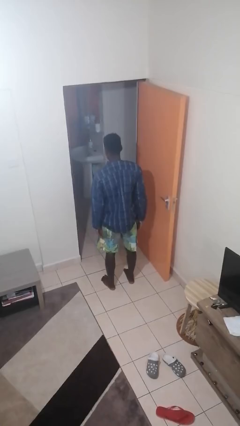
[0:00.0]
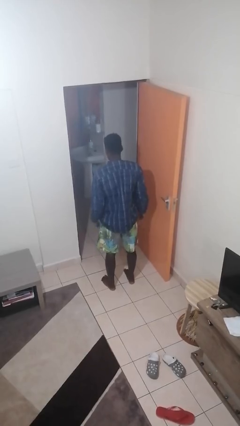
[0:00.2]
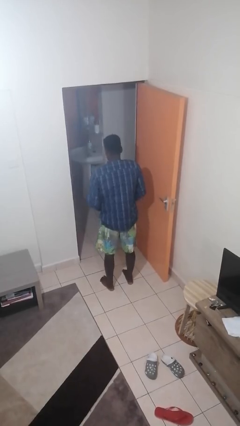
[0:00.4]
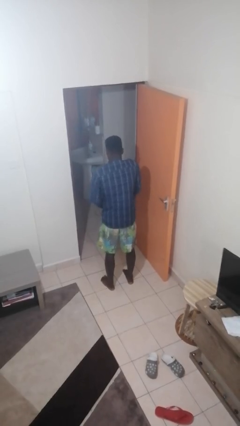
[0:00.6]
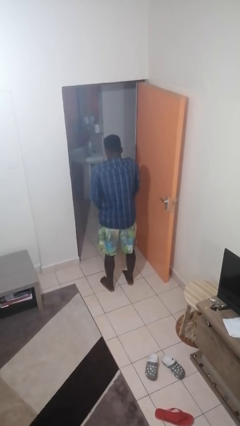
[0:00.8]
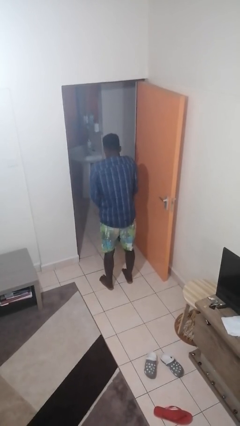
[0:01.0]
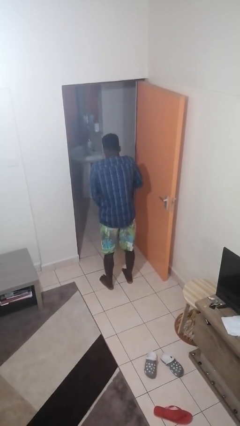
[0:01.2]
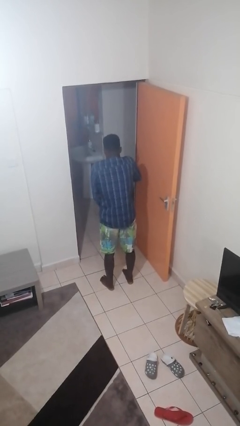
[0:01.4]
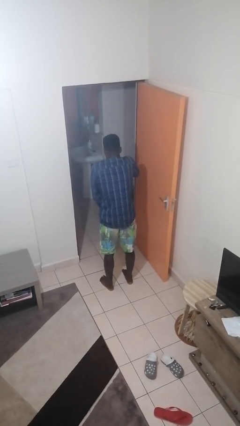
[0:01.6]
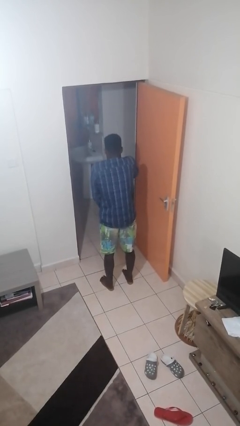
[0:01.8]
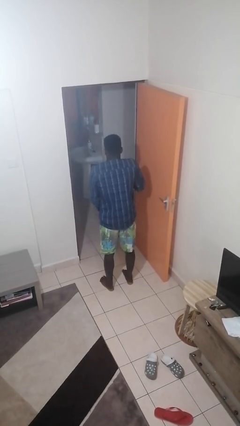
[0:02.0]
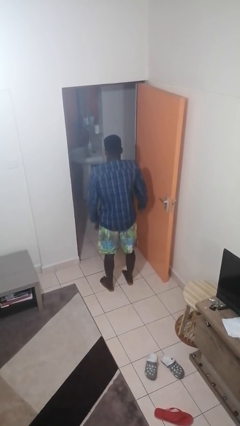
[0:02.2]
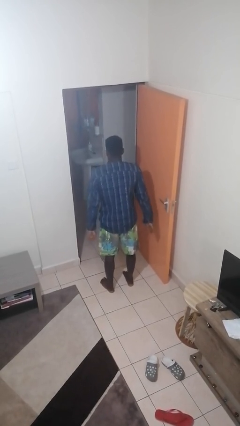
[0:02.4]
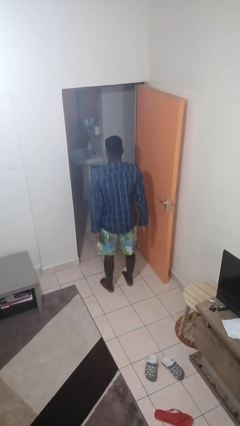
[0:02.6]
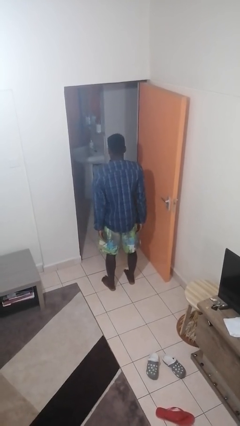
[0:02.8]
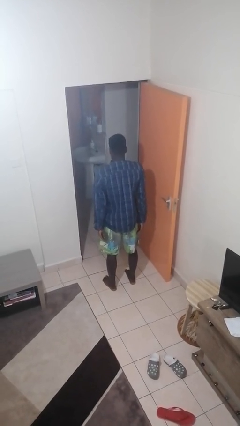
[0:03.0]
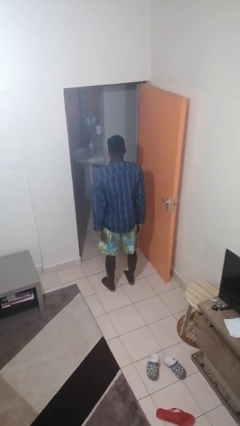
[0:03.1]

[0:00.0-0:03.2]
person zips up jacket

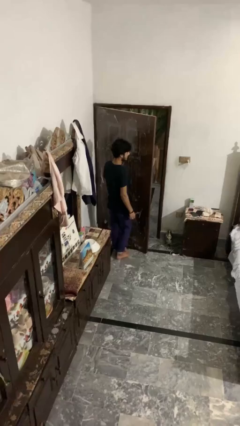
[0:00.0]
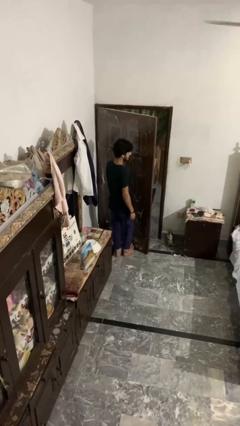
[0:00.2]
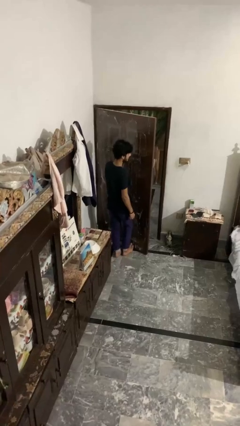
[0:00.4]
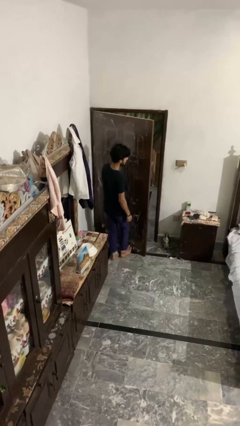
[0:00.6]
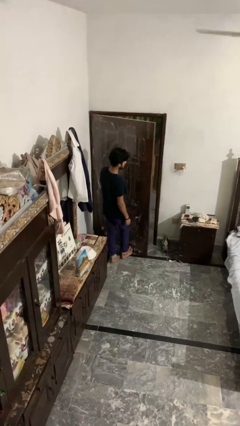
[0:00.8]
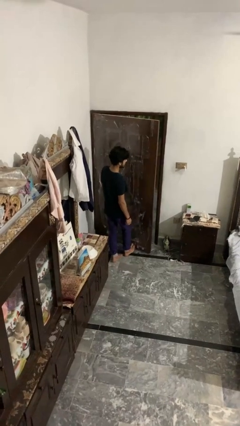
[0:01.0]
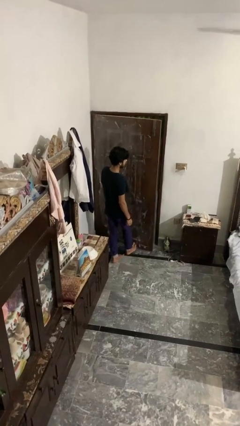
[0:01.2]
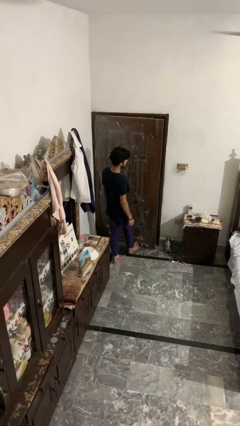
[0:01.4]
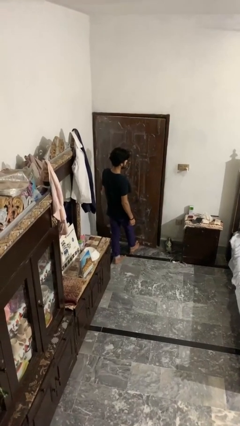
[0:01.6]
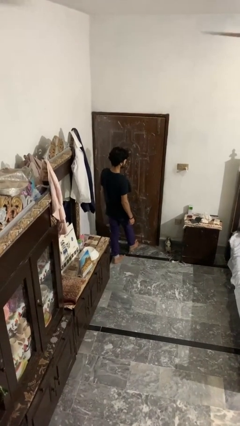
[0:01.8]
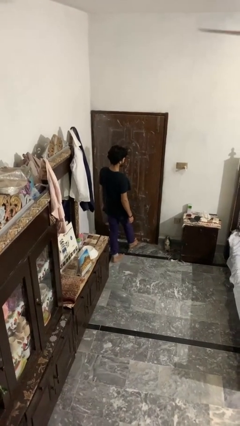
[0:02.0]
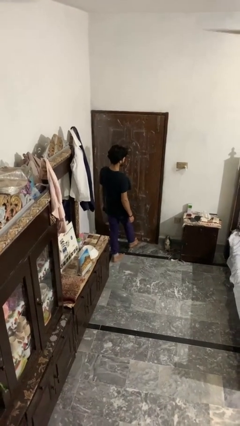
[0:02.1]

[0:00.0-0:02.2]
person closes door with foot

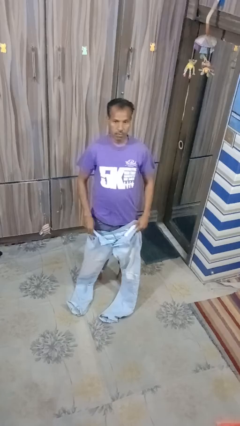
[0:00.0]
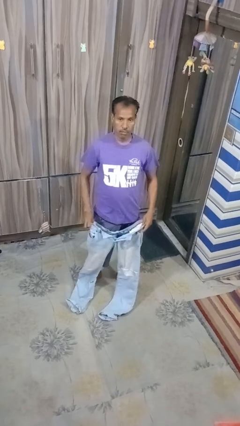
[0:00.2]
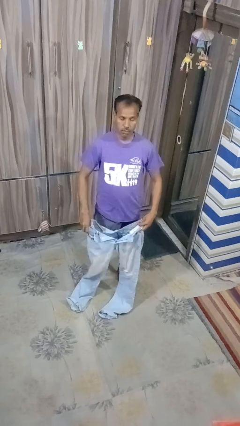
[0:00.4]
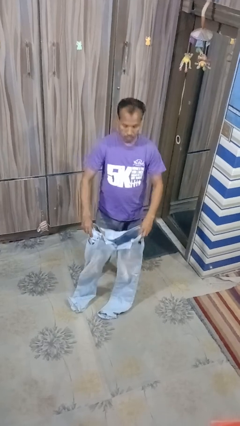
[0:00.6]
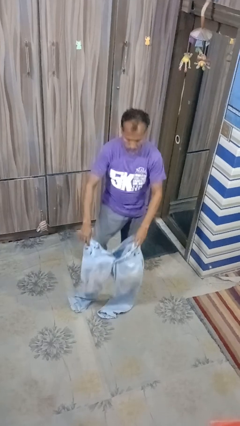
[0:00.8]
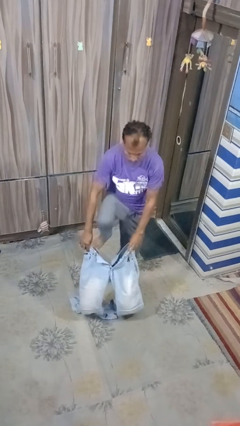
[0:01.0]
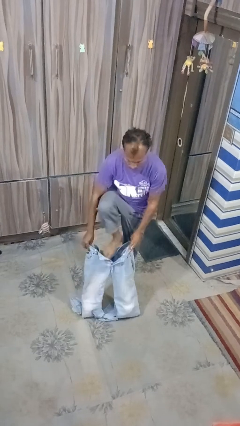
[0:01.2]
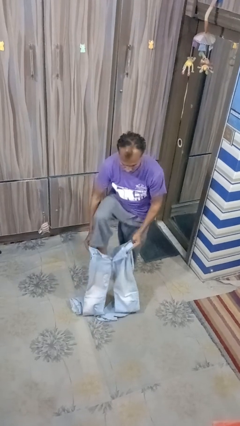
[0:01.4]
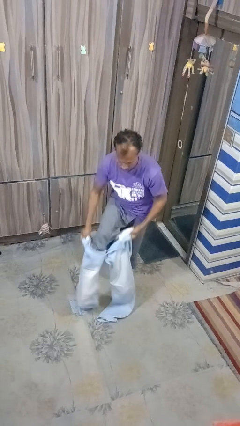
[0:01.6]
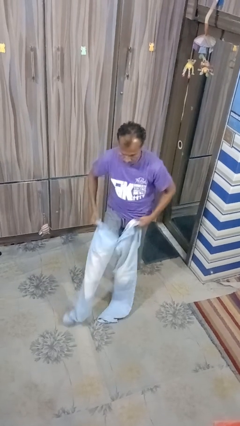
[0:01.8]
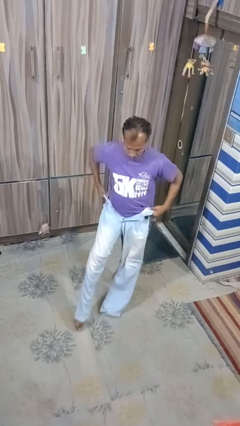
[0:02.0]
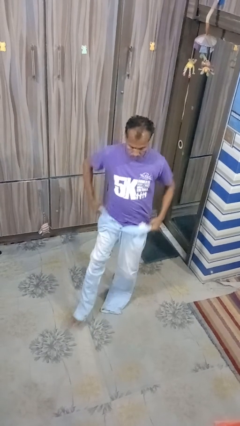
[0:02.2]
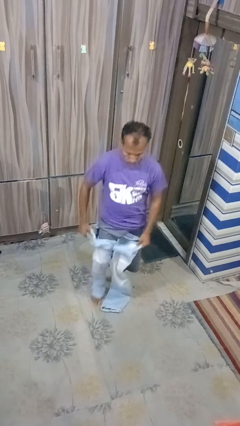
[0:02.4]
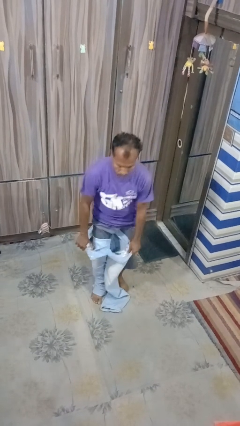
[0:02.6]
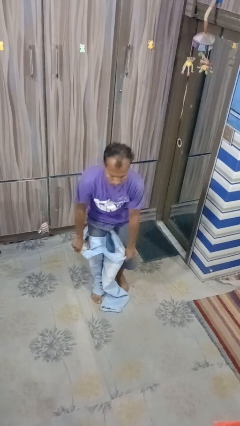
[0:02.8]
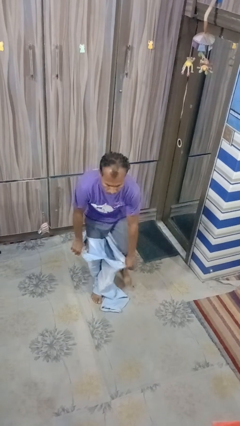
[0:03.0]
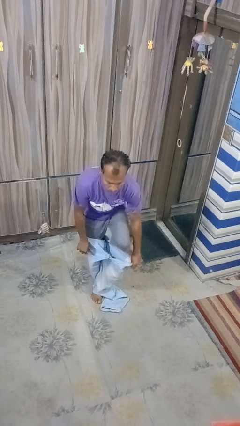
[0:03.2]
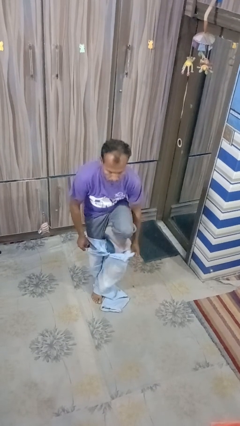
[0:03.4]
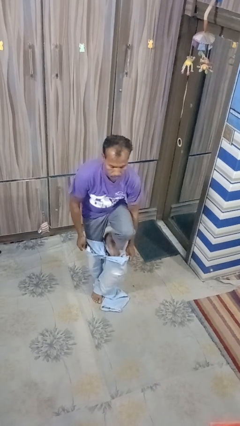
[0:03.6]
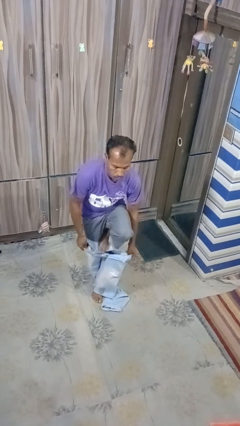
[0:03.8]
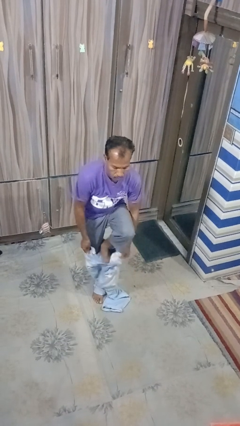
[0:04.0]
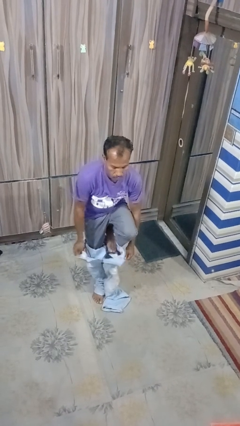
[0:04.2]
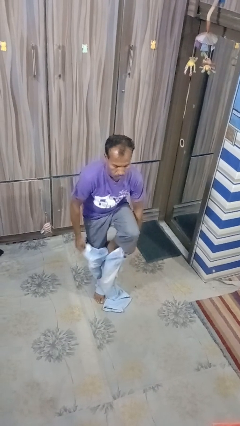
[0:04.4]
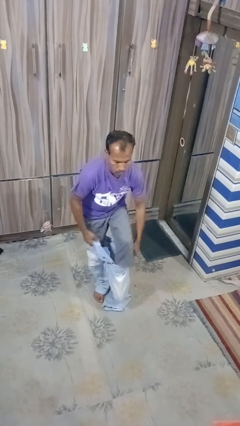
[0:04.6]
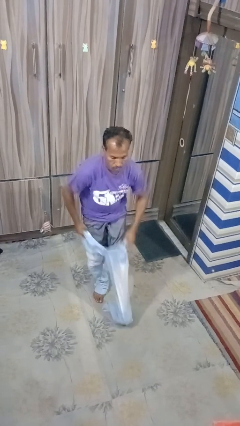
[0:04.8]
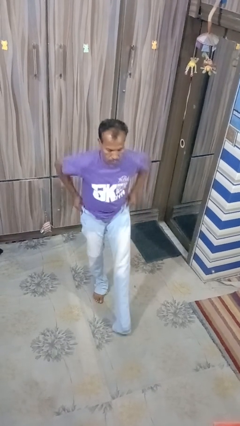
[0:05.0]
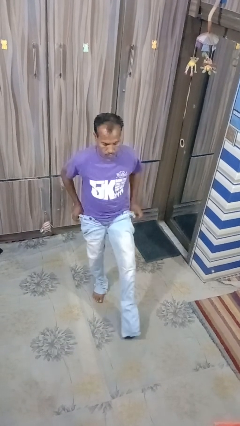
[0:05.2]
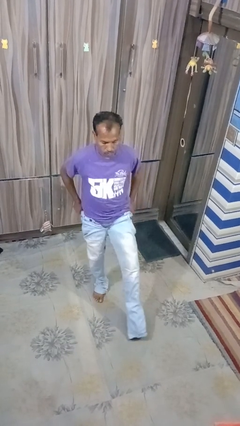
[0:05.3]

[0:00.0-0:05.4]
person puts on pants

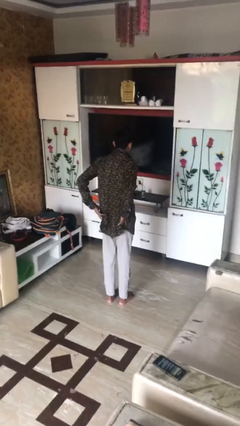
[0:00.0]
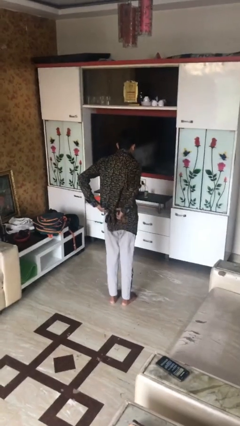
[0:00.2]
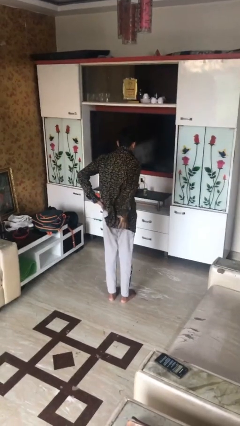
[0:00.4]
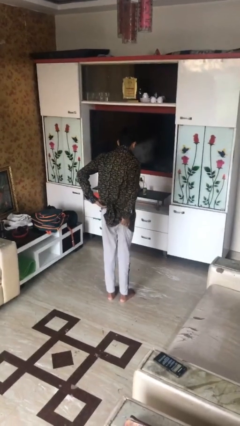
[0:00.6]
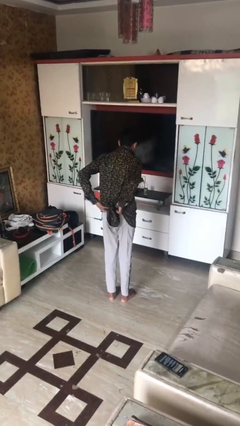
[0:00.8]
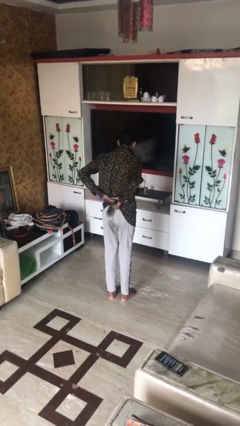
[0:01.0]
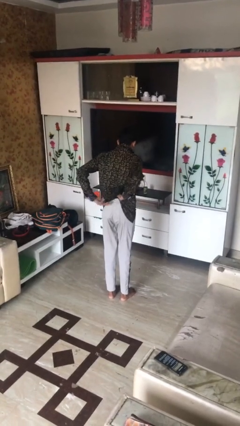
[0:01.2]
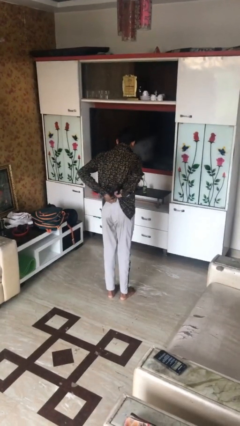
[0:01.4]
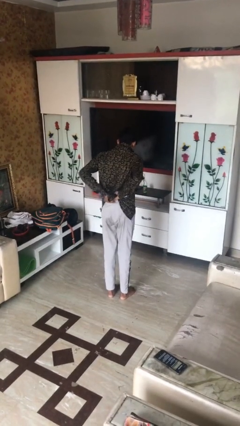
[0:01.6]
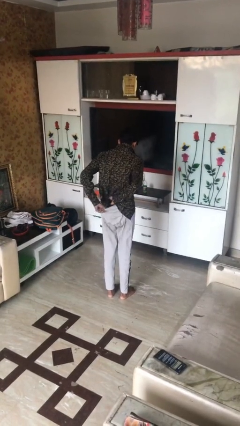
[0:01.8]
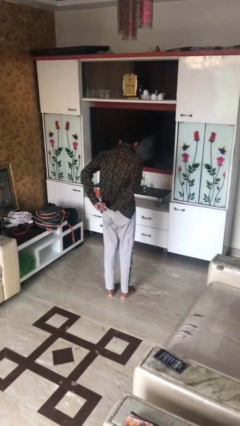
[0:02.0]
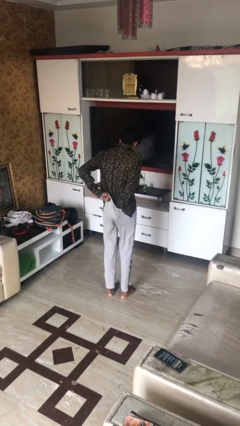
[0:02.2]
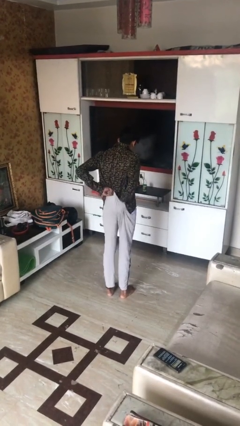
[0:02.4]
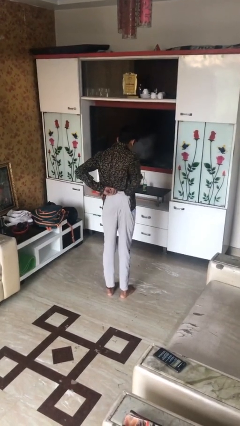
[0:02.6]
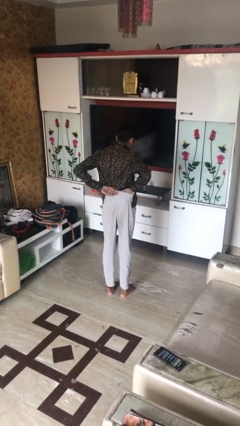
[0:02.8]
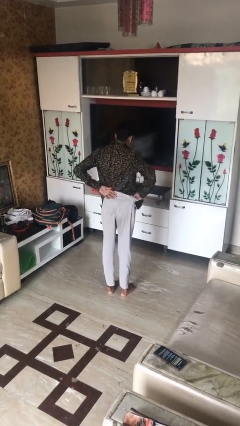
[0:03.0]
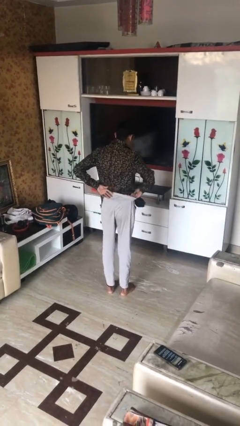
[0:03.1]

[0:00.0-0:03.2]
person tucks in shirt

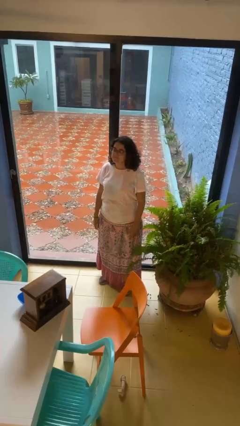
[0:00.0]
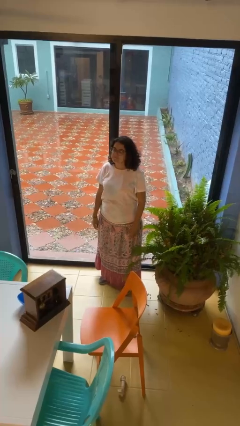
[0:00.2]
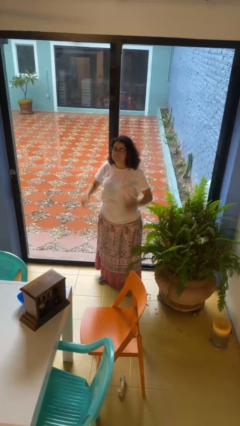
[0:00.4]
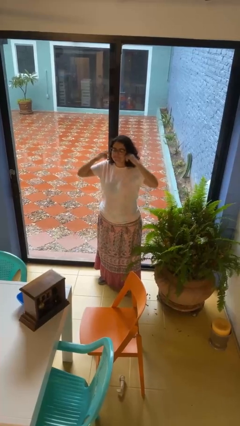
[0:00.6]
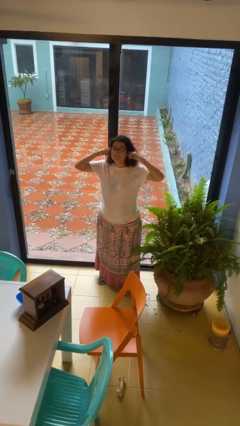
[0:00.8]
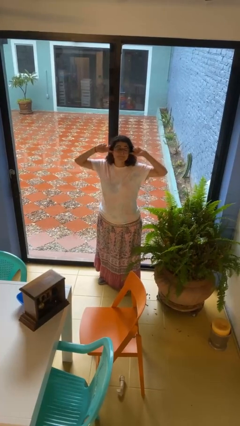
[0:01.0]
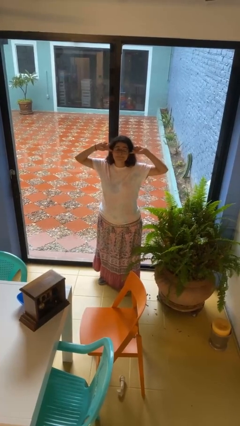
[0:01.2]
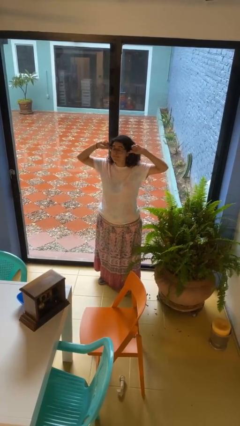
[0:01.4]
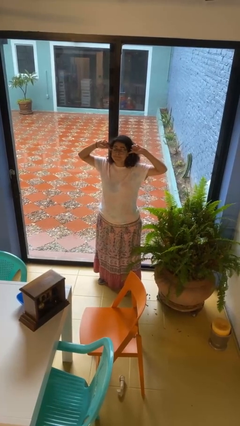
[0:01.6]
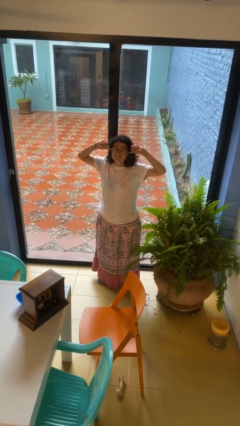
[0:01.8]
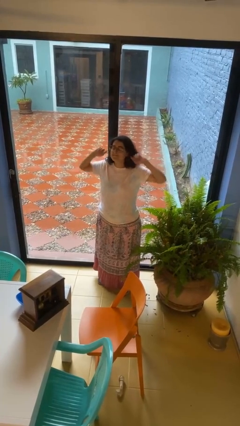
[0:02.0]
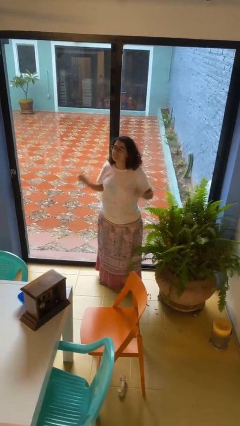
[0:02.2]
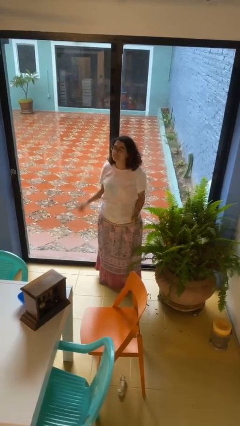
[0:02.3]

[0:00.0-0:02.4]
person puts fingers in ear

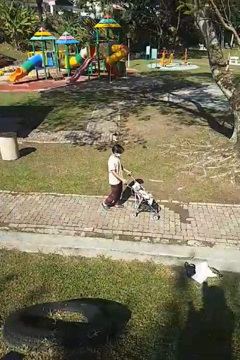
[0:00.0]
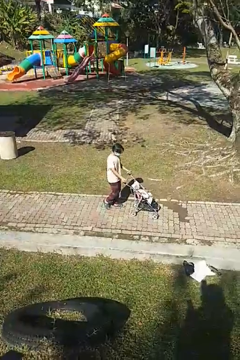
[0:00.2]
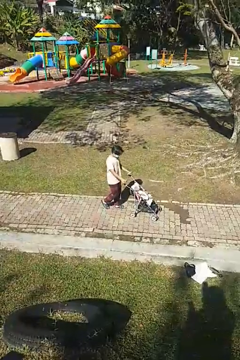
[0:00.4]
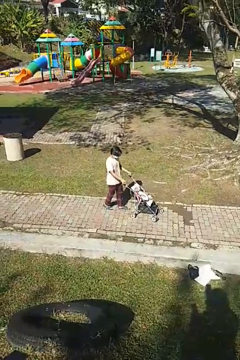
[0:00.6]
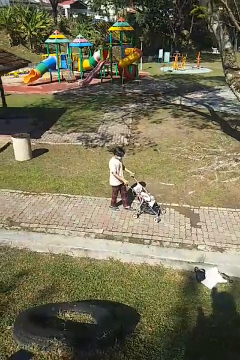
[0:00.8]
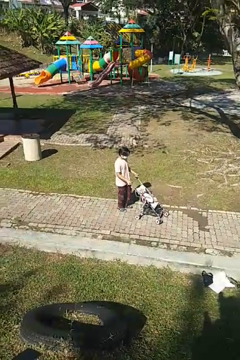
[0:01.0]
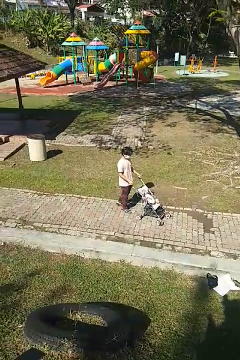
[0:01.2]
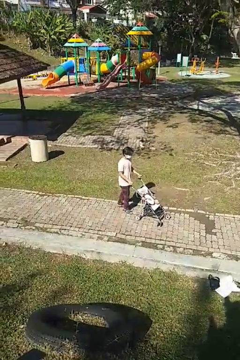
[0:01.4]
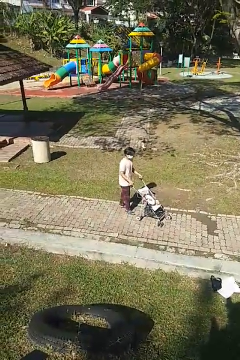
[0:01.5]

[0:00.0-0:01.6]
person pulls wheeled cart
